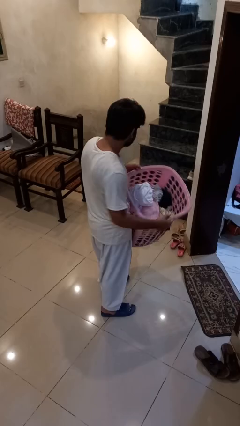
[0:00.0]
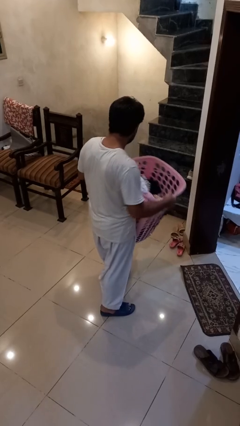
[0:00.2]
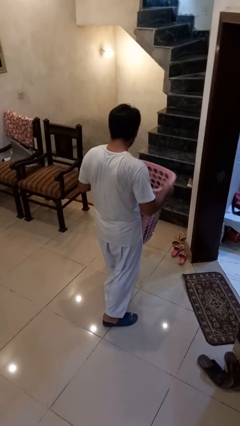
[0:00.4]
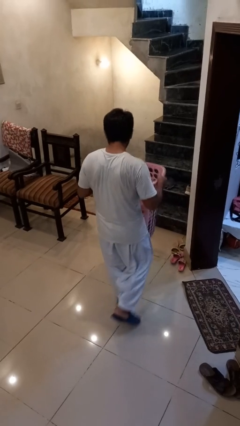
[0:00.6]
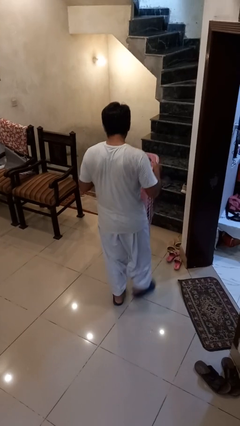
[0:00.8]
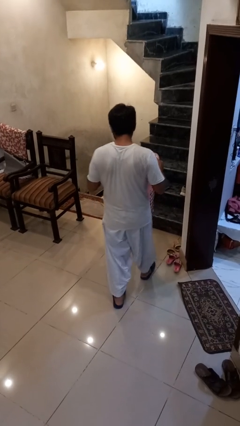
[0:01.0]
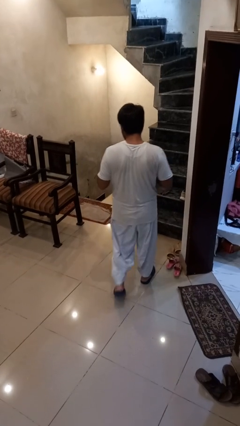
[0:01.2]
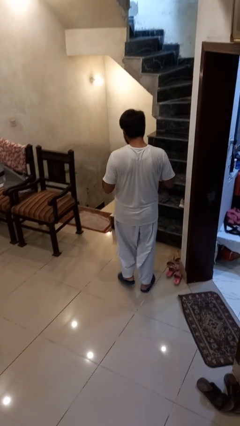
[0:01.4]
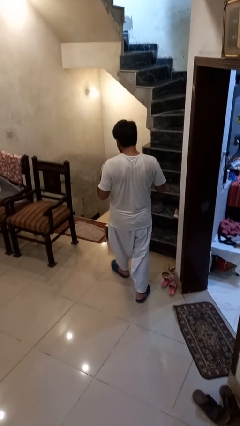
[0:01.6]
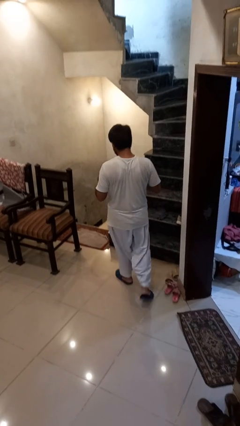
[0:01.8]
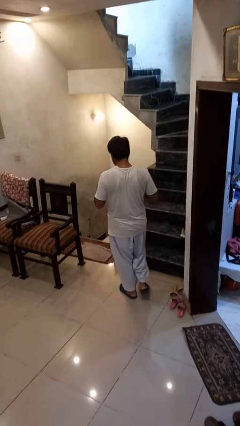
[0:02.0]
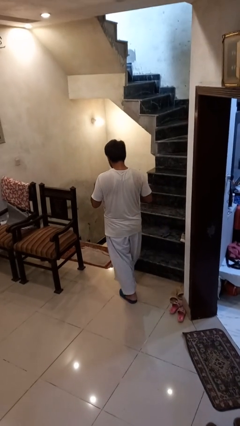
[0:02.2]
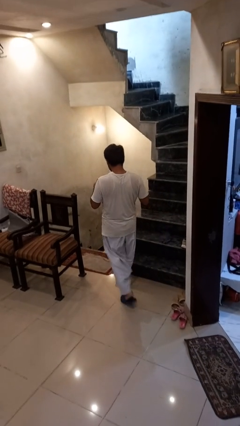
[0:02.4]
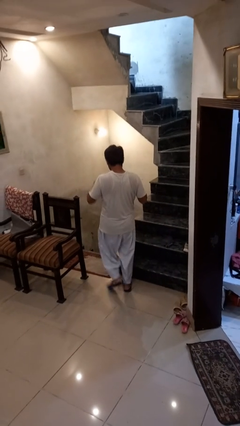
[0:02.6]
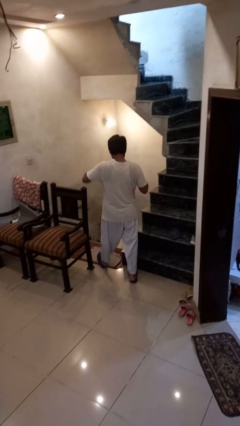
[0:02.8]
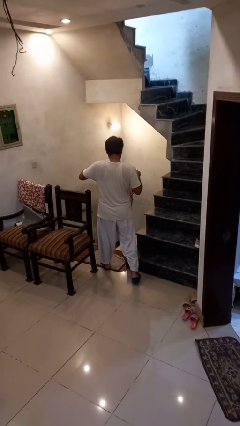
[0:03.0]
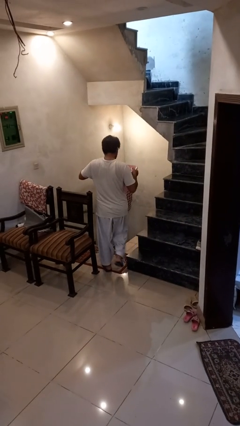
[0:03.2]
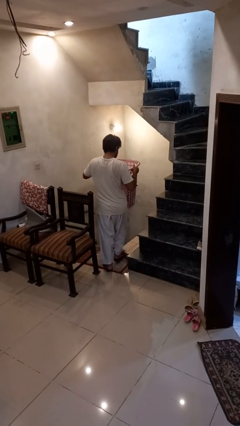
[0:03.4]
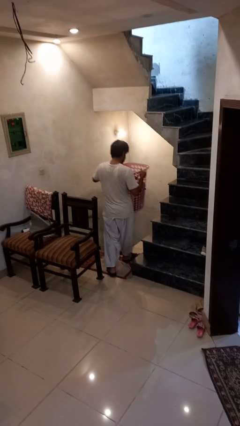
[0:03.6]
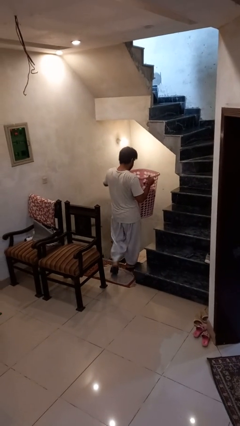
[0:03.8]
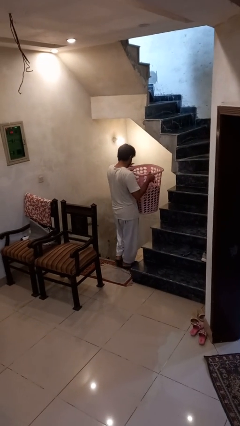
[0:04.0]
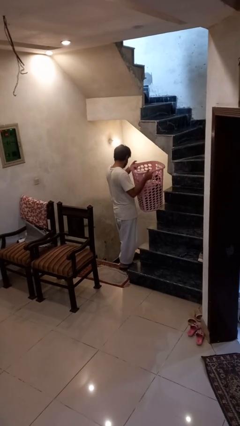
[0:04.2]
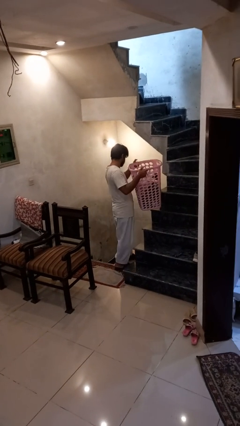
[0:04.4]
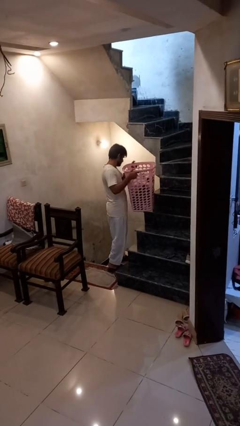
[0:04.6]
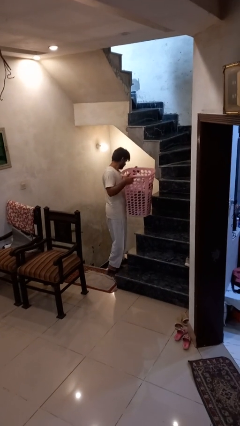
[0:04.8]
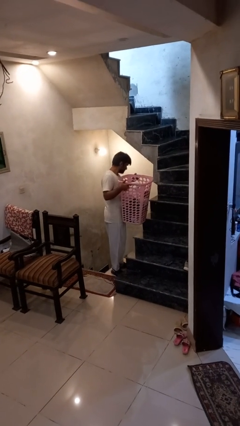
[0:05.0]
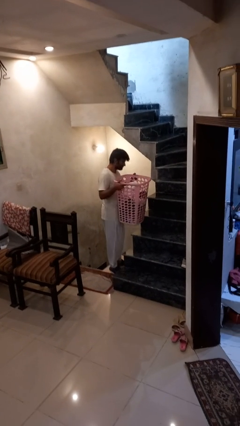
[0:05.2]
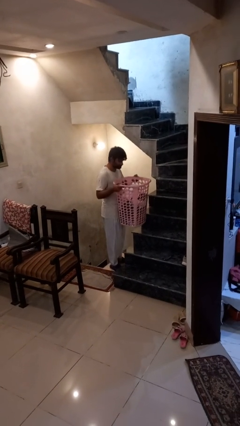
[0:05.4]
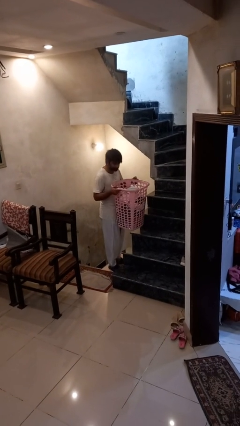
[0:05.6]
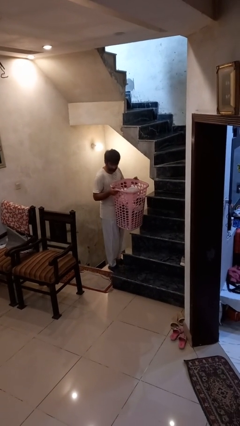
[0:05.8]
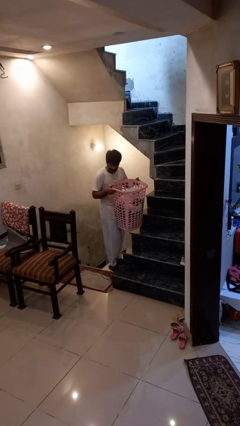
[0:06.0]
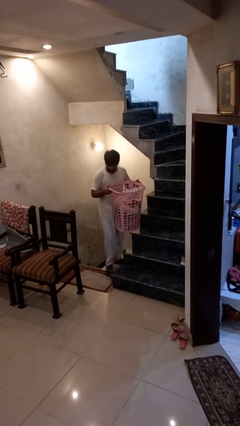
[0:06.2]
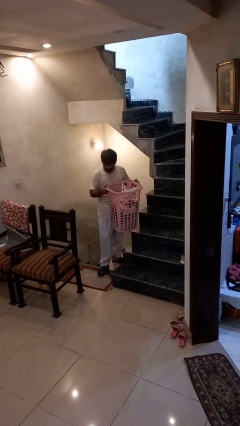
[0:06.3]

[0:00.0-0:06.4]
person carries laundry basket

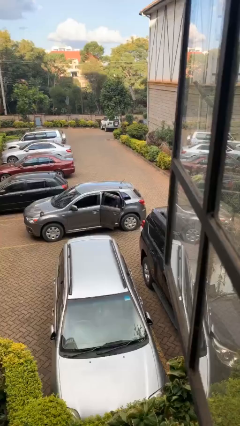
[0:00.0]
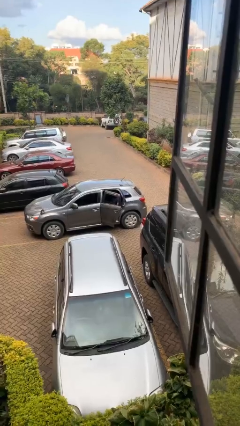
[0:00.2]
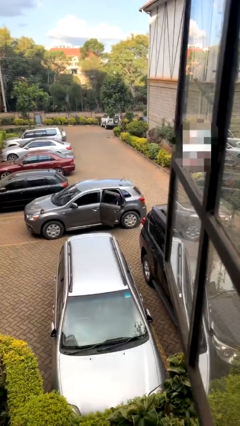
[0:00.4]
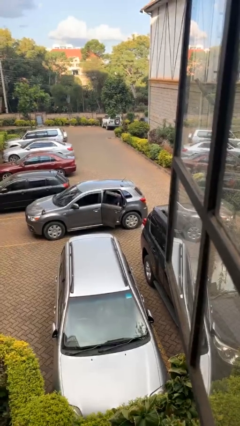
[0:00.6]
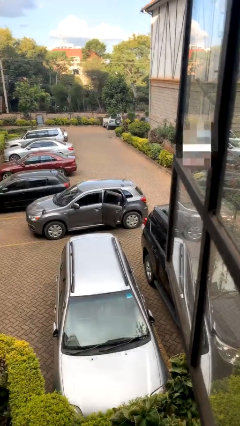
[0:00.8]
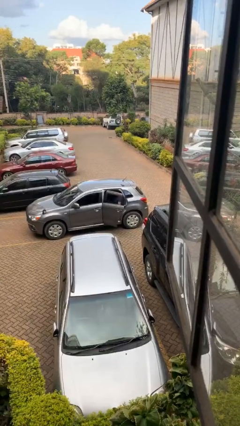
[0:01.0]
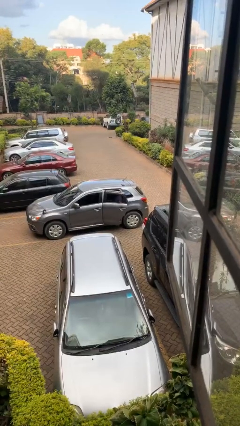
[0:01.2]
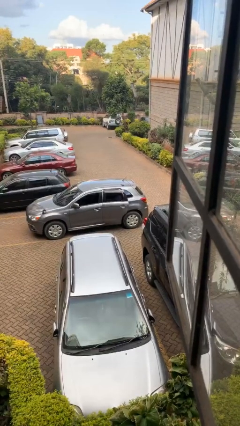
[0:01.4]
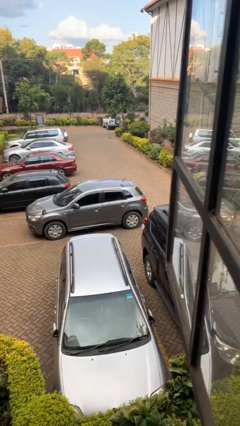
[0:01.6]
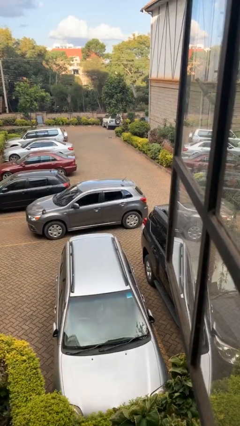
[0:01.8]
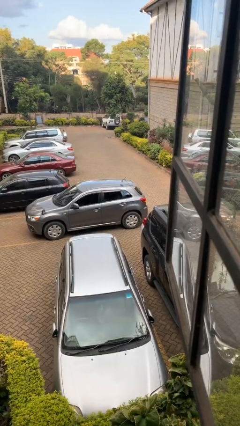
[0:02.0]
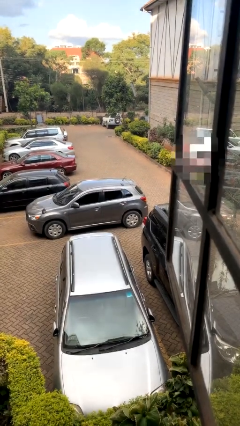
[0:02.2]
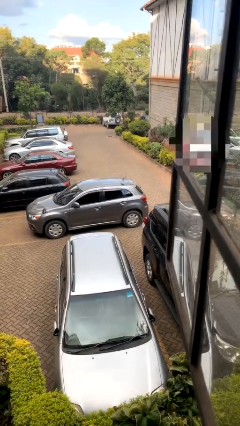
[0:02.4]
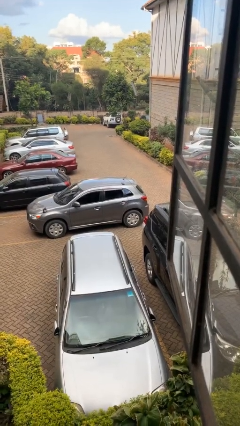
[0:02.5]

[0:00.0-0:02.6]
person closes car door

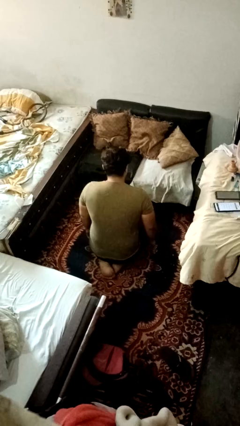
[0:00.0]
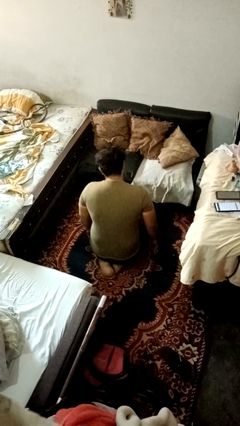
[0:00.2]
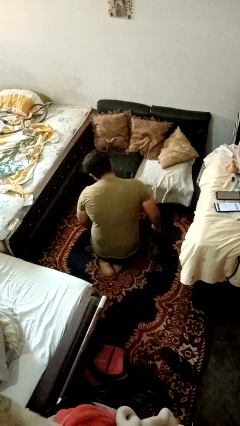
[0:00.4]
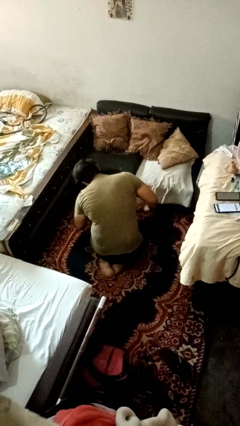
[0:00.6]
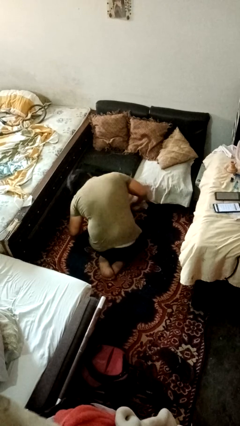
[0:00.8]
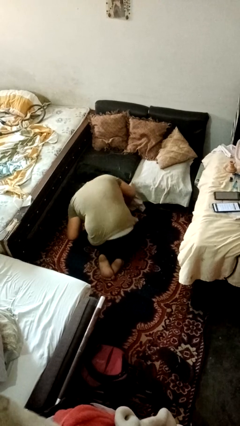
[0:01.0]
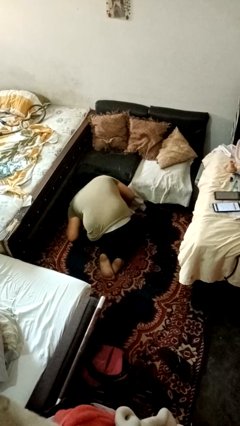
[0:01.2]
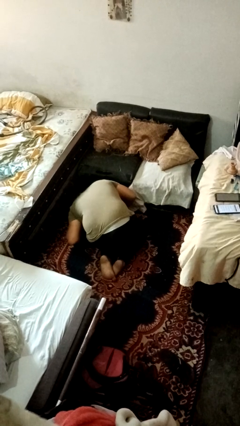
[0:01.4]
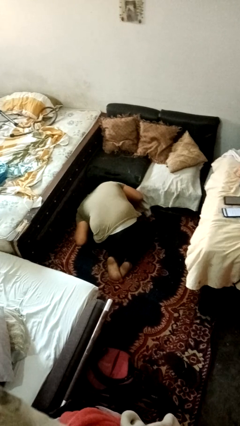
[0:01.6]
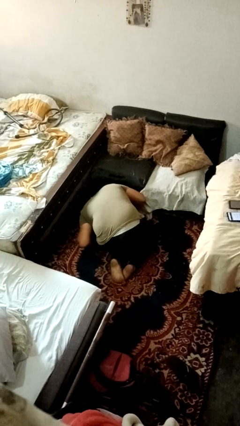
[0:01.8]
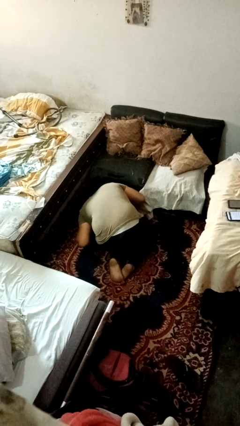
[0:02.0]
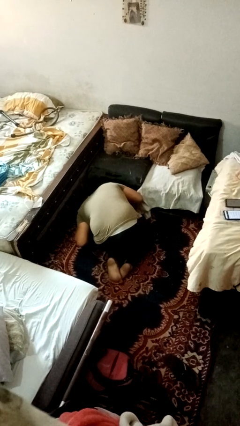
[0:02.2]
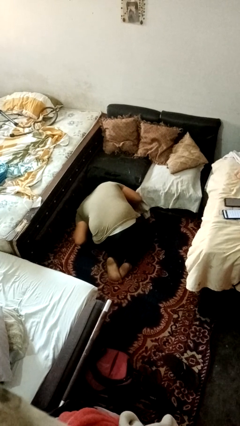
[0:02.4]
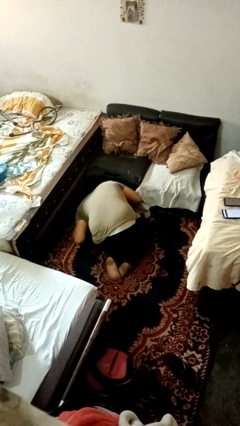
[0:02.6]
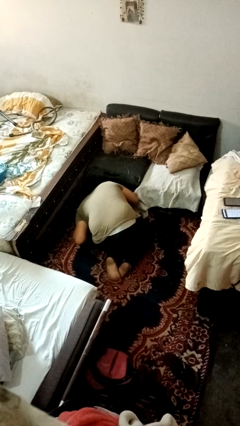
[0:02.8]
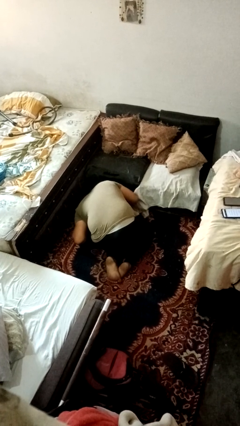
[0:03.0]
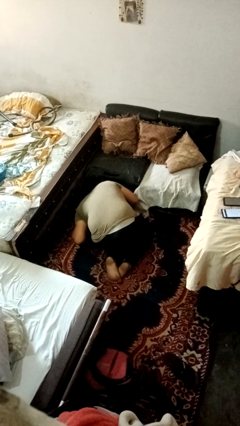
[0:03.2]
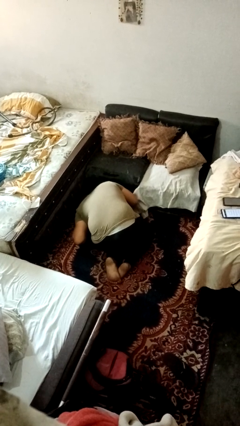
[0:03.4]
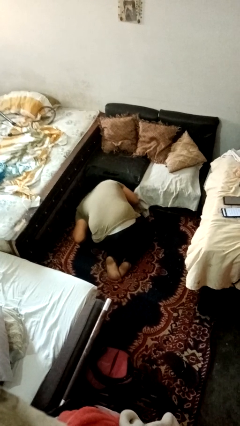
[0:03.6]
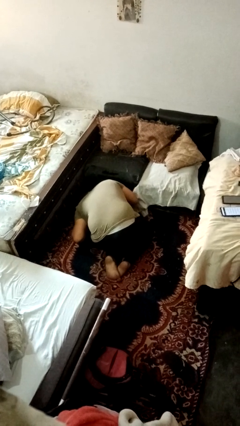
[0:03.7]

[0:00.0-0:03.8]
person searches under couch

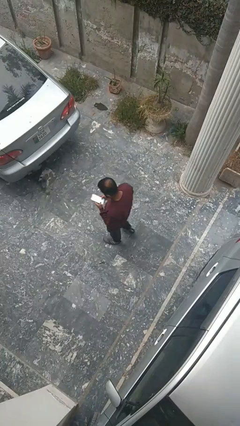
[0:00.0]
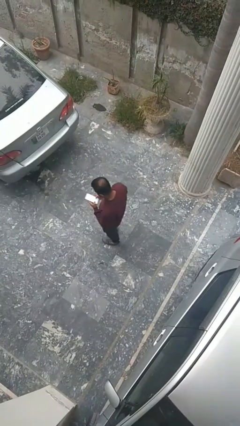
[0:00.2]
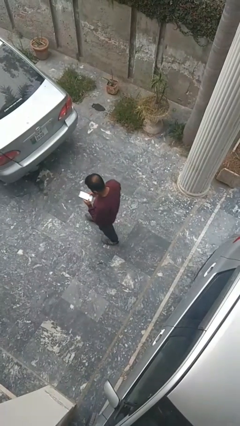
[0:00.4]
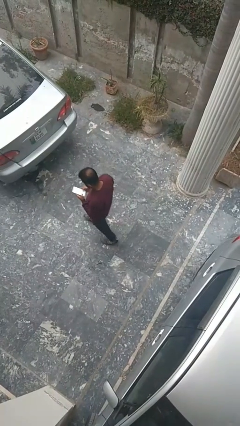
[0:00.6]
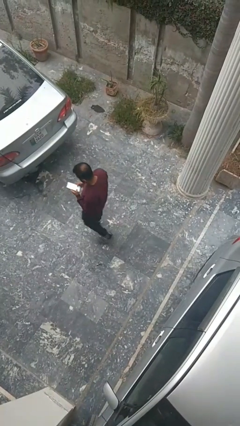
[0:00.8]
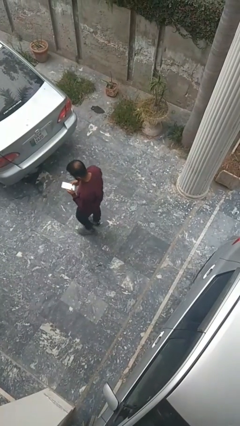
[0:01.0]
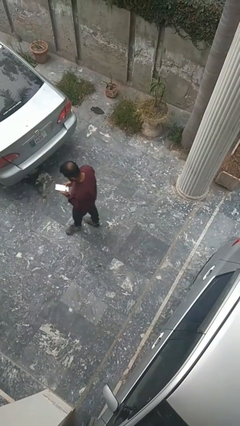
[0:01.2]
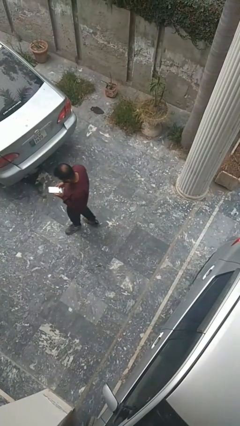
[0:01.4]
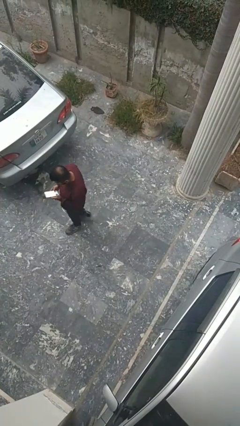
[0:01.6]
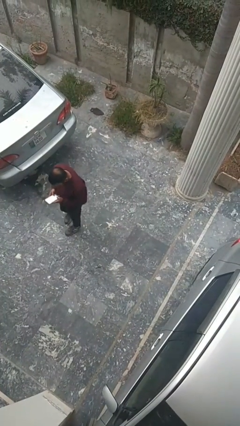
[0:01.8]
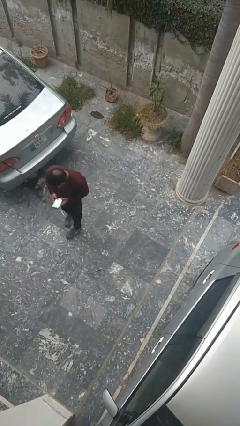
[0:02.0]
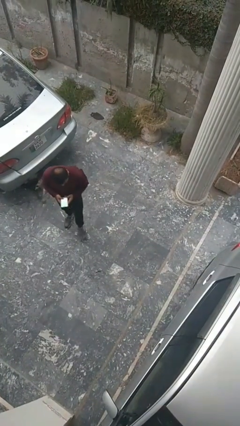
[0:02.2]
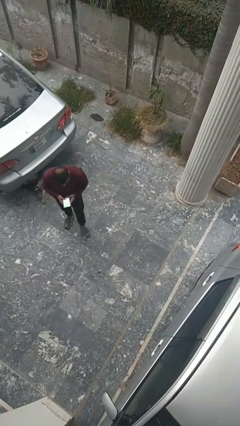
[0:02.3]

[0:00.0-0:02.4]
person exits scene through structure

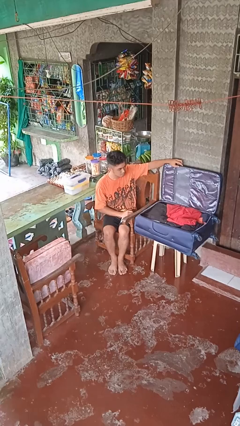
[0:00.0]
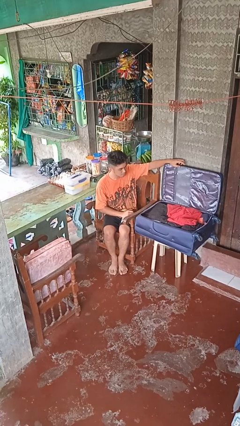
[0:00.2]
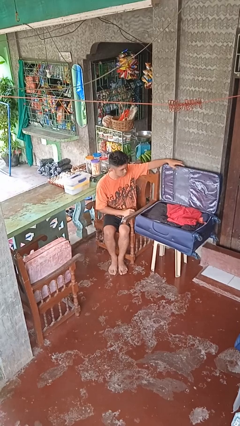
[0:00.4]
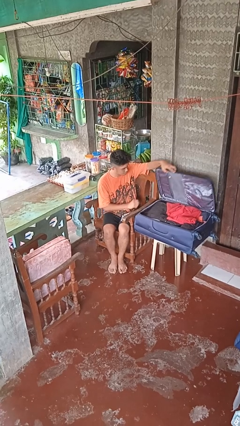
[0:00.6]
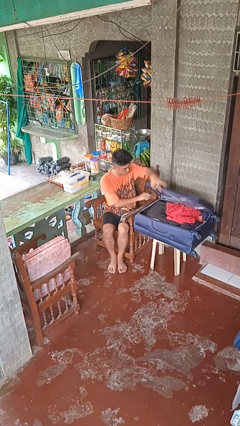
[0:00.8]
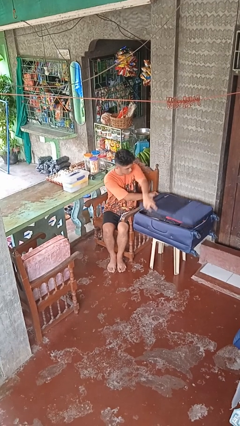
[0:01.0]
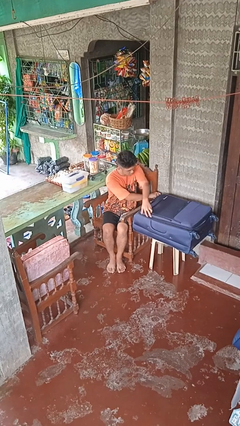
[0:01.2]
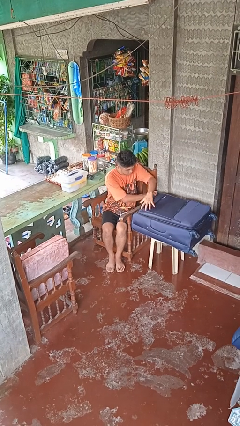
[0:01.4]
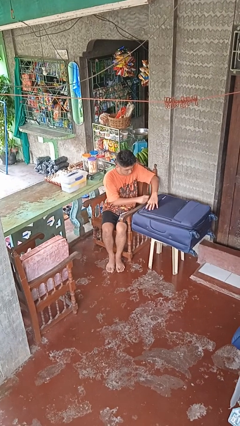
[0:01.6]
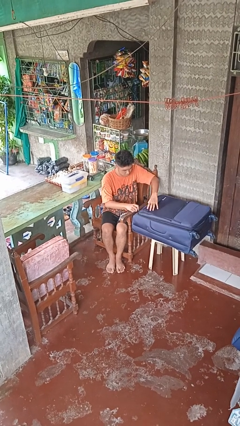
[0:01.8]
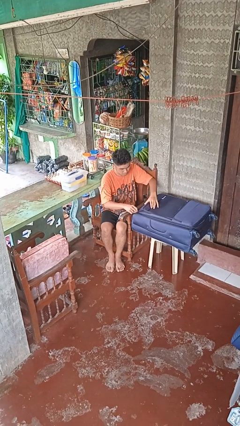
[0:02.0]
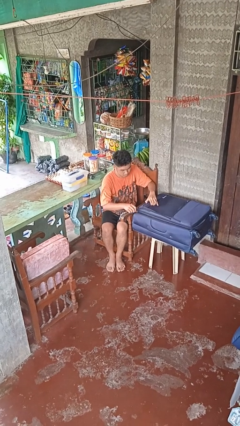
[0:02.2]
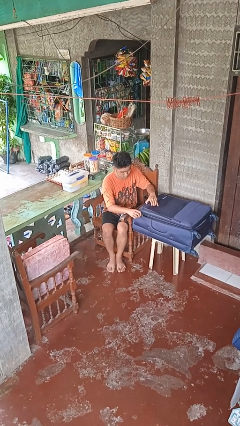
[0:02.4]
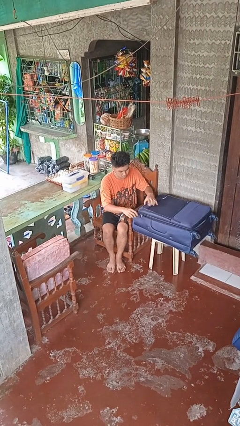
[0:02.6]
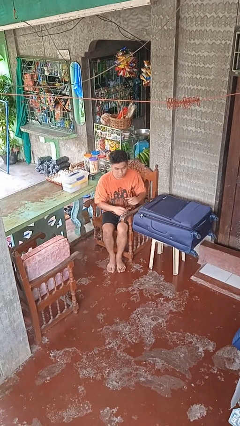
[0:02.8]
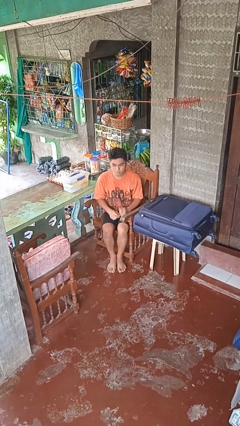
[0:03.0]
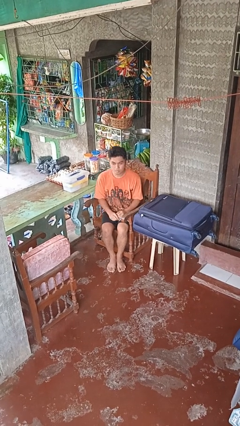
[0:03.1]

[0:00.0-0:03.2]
person closes suitcase
